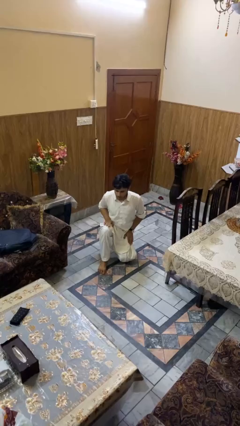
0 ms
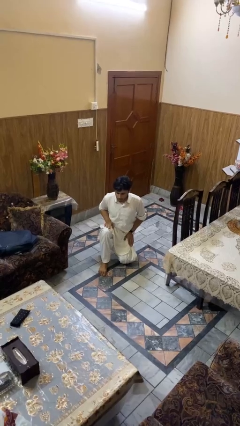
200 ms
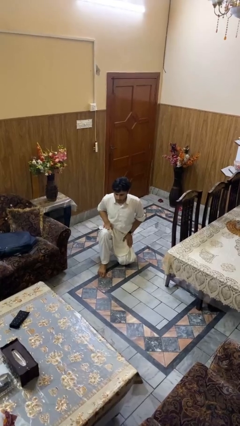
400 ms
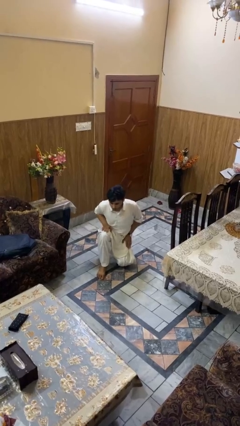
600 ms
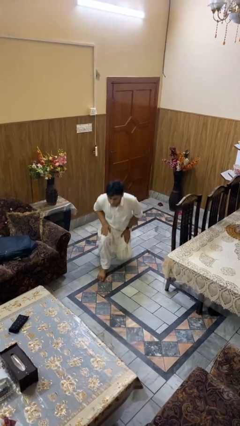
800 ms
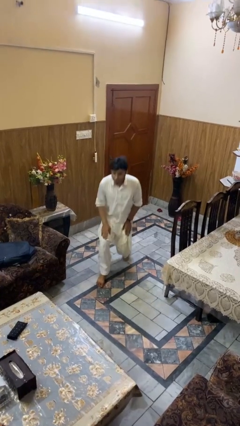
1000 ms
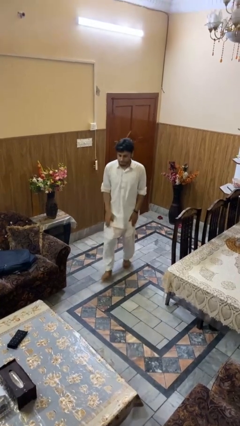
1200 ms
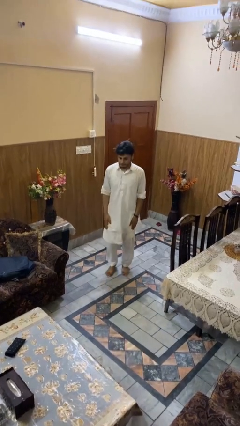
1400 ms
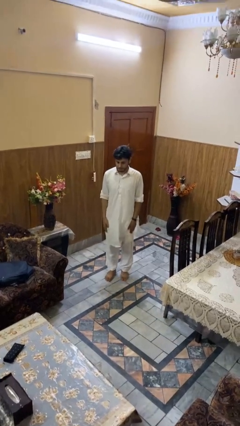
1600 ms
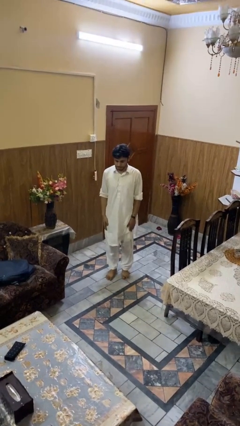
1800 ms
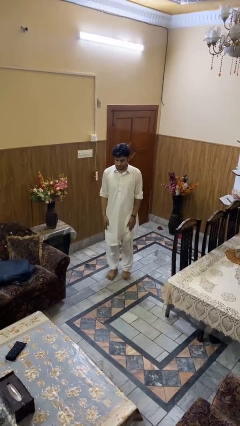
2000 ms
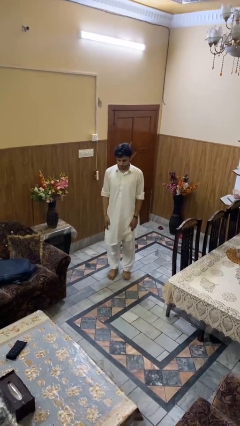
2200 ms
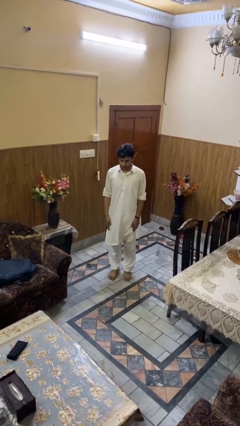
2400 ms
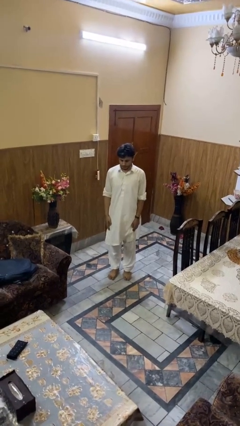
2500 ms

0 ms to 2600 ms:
person stands up from floor

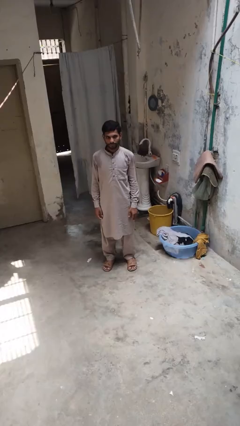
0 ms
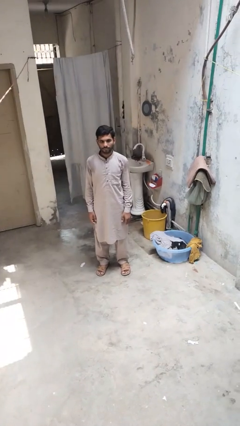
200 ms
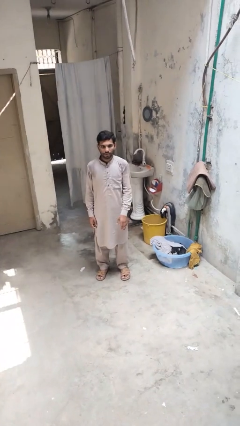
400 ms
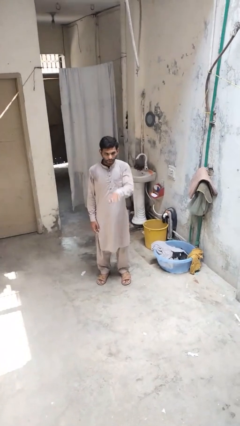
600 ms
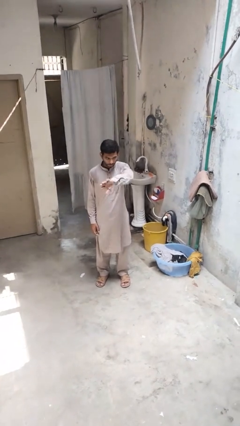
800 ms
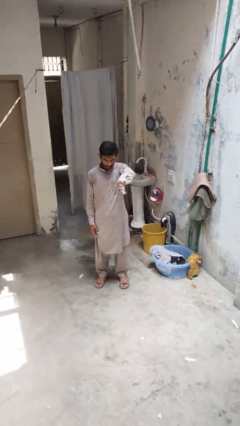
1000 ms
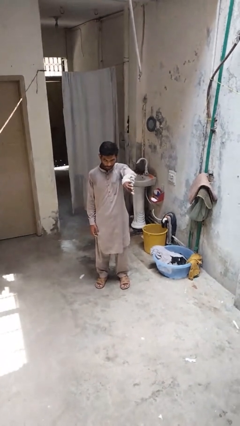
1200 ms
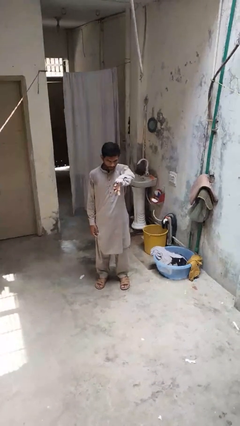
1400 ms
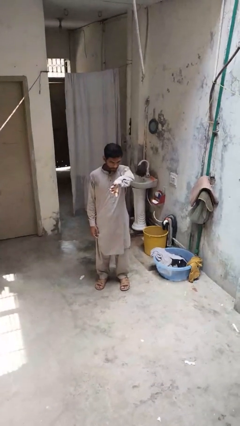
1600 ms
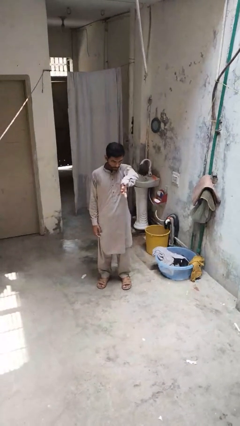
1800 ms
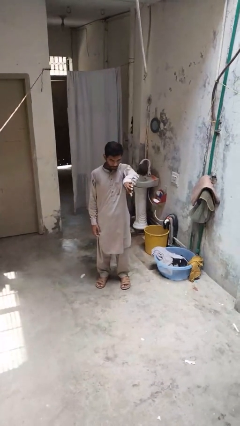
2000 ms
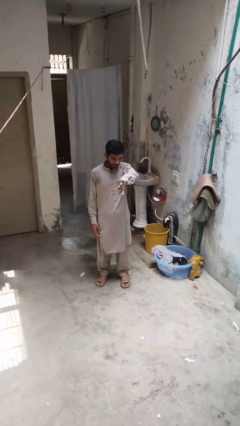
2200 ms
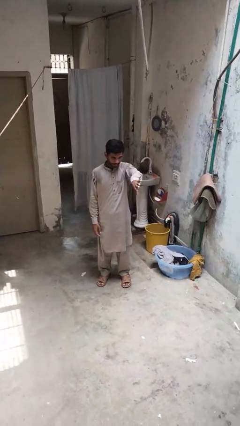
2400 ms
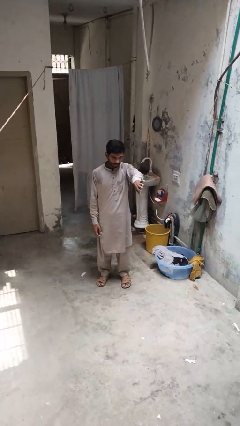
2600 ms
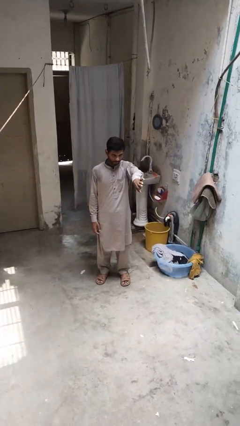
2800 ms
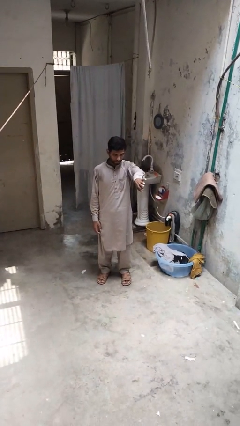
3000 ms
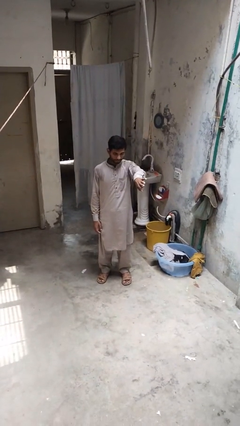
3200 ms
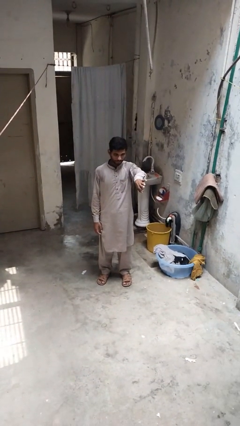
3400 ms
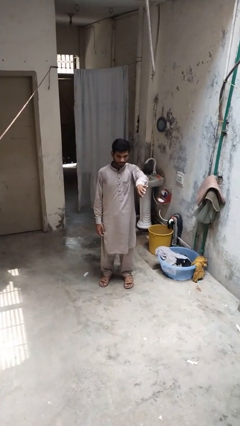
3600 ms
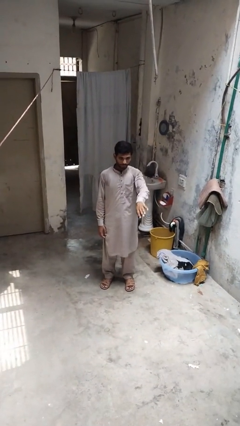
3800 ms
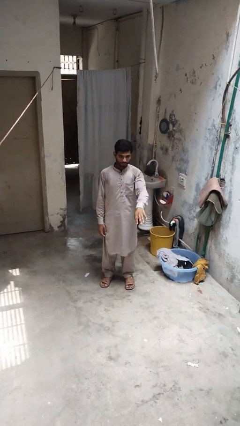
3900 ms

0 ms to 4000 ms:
person gestures swipe left

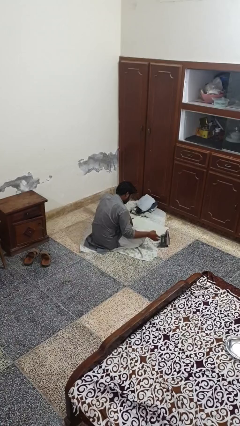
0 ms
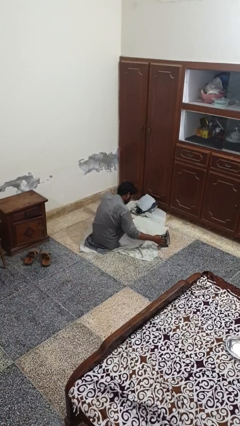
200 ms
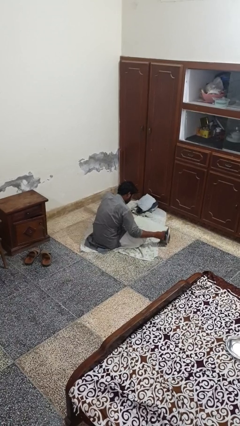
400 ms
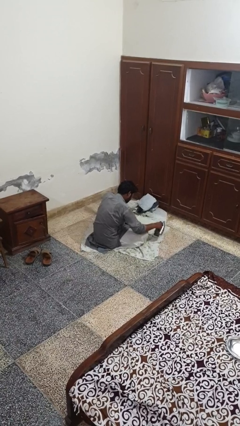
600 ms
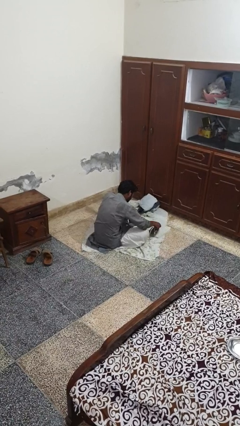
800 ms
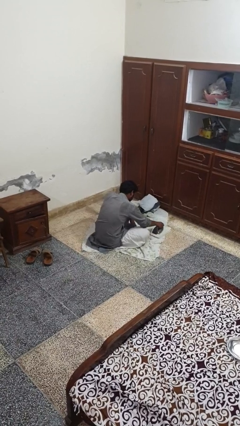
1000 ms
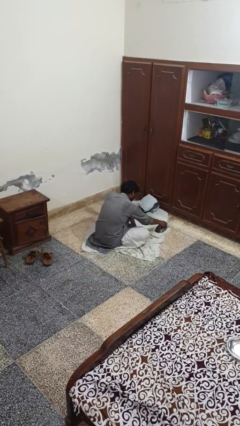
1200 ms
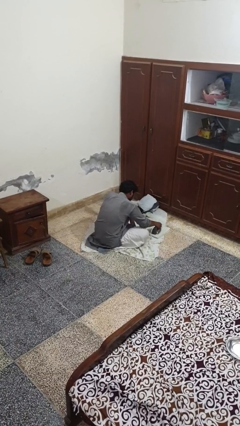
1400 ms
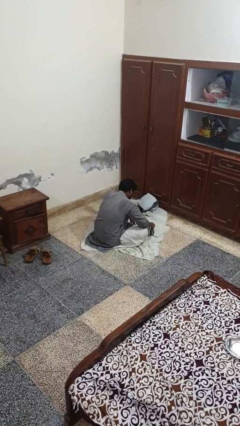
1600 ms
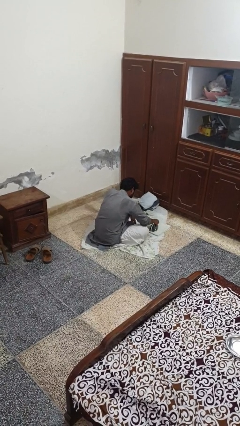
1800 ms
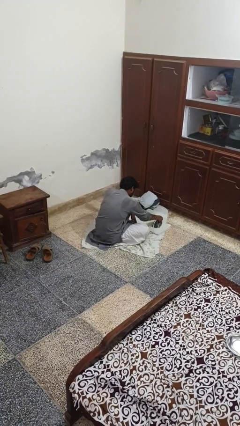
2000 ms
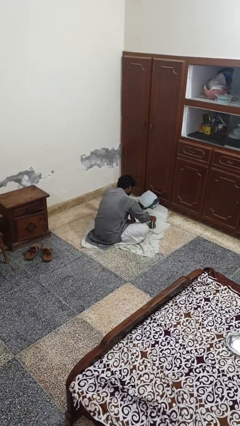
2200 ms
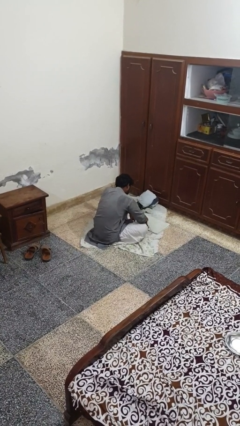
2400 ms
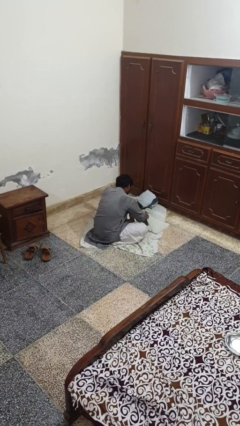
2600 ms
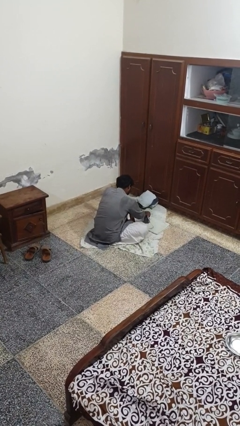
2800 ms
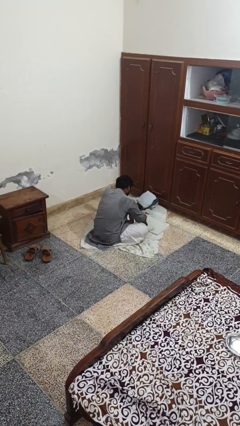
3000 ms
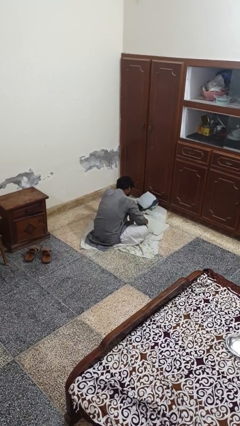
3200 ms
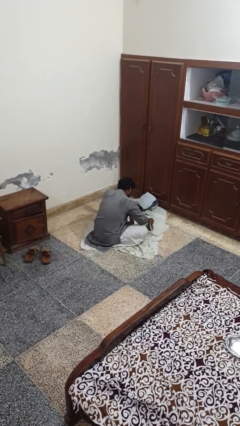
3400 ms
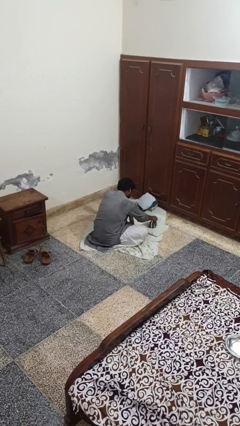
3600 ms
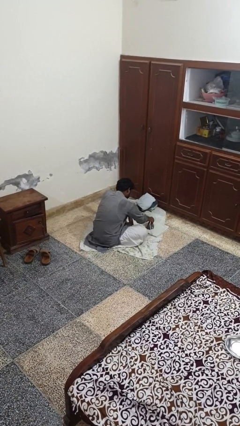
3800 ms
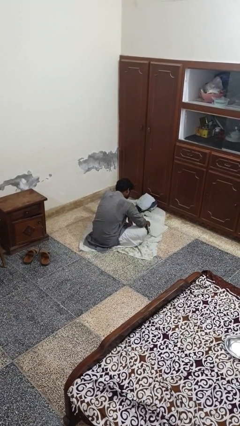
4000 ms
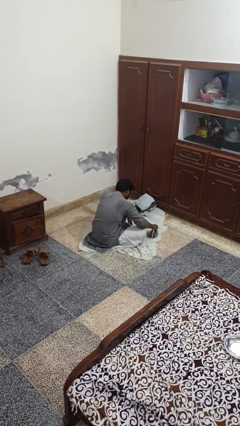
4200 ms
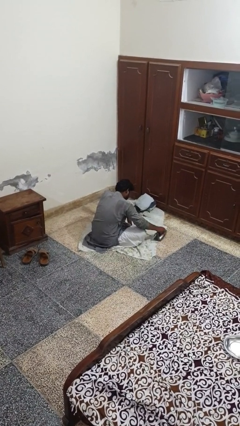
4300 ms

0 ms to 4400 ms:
person irons clothes

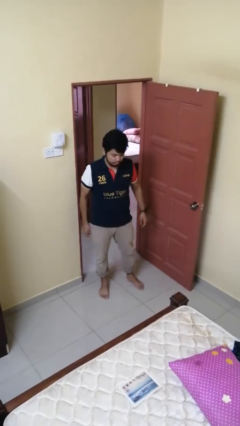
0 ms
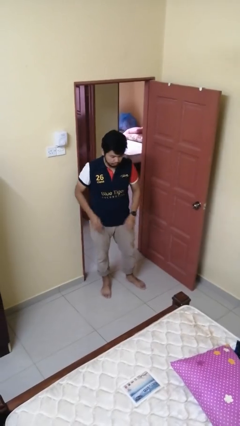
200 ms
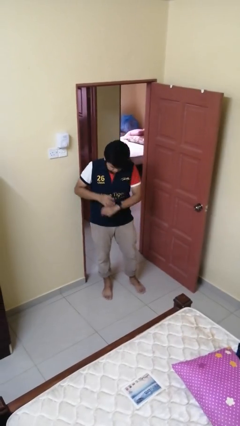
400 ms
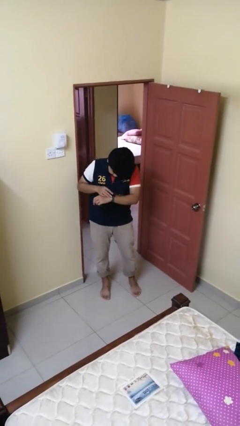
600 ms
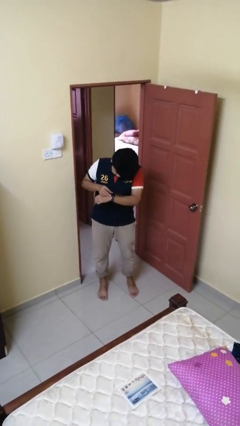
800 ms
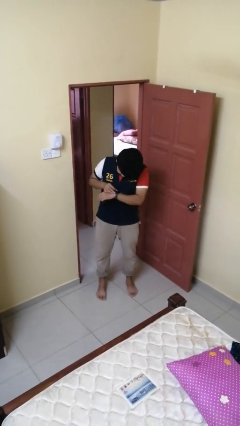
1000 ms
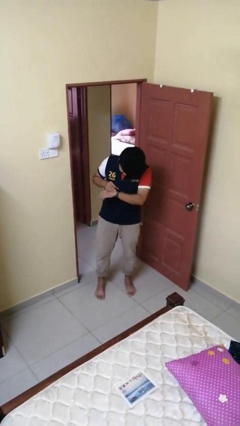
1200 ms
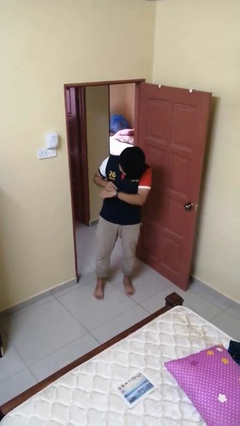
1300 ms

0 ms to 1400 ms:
person looks at wristwatch

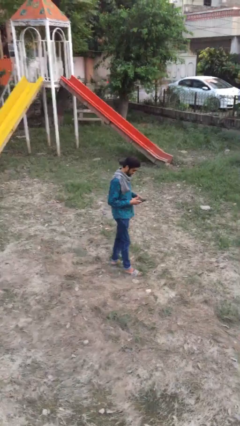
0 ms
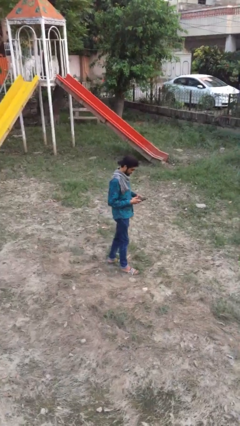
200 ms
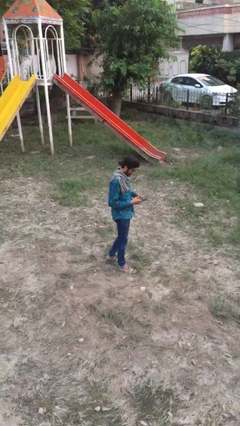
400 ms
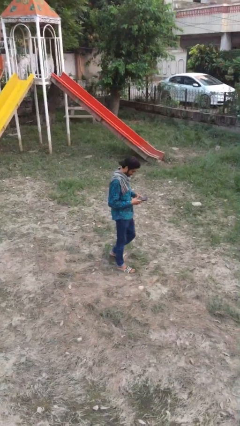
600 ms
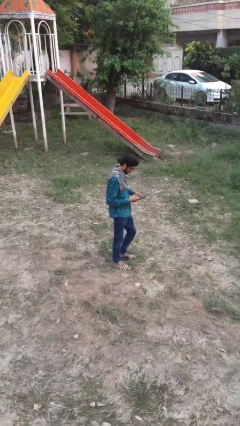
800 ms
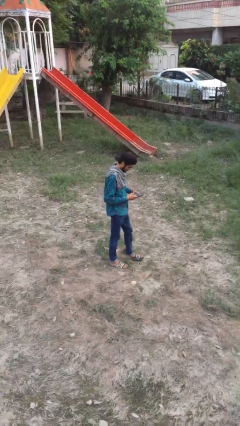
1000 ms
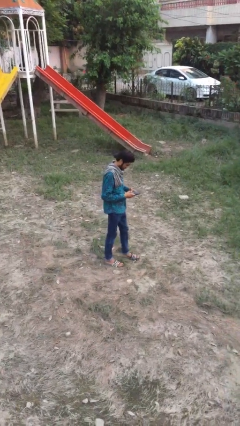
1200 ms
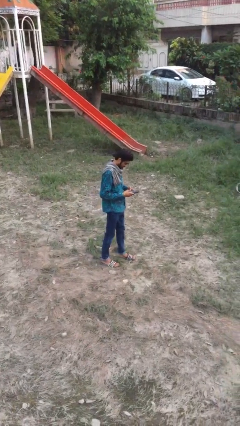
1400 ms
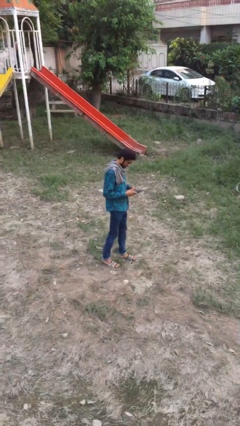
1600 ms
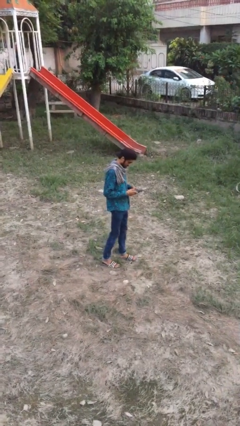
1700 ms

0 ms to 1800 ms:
person texts on phone

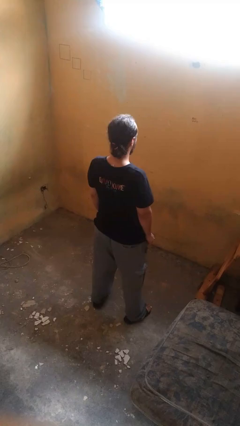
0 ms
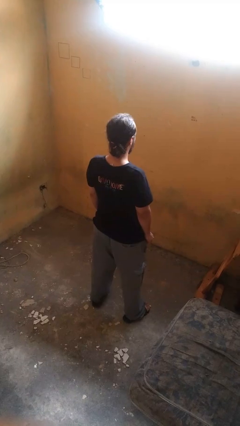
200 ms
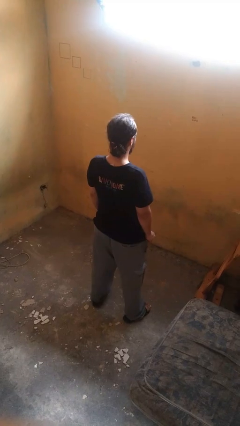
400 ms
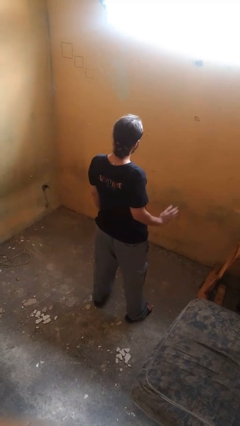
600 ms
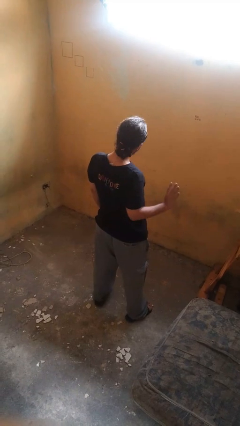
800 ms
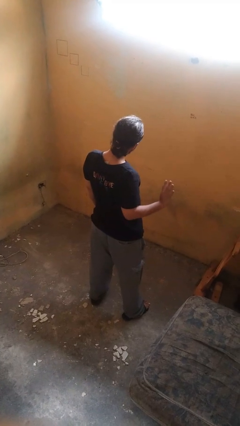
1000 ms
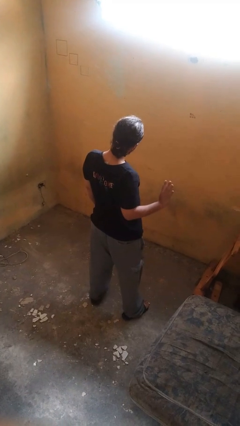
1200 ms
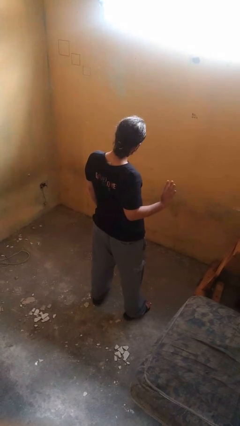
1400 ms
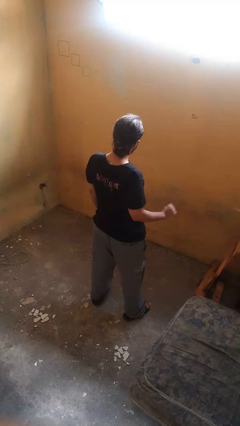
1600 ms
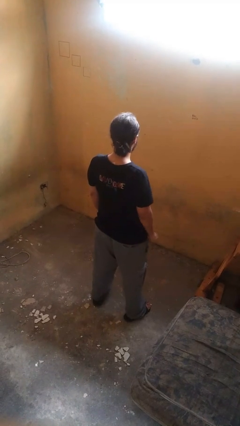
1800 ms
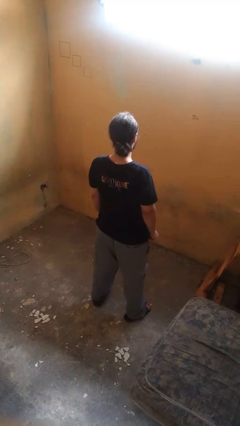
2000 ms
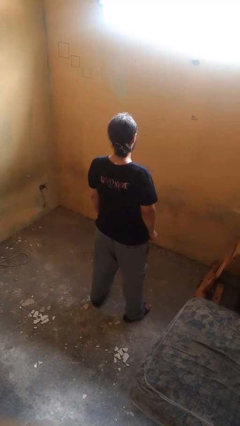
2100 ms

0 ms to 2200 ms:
person gestures number four

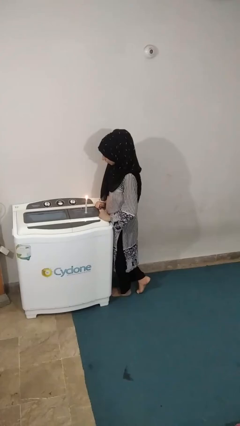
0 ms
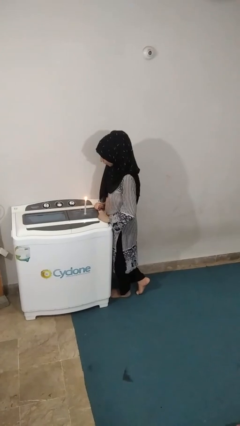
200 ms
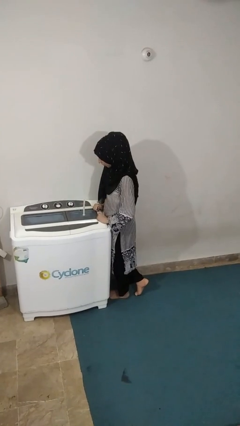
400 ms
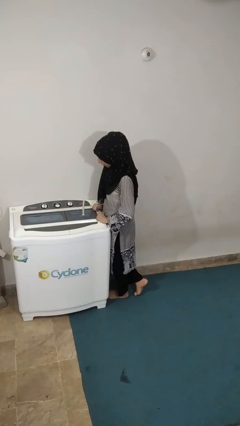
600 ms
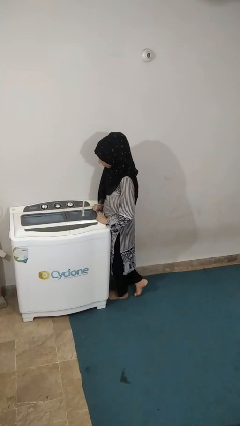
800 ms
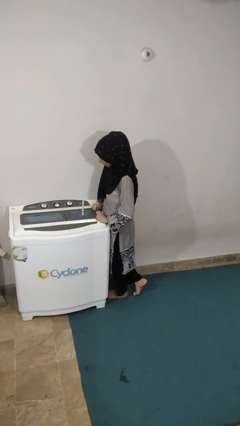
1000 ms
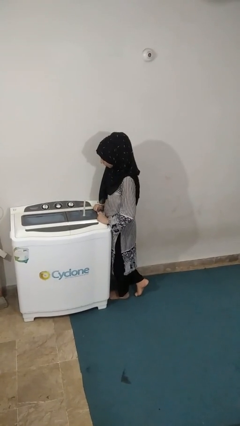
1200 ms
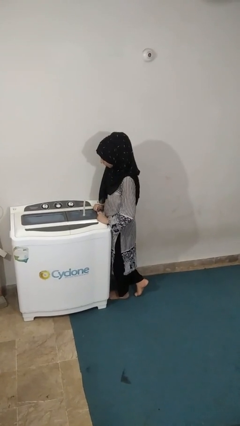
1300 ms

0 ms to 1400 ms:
person extinguishes candle
